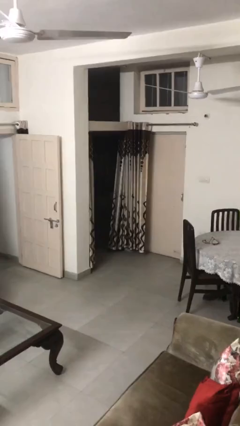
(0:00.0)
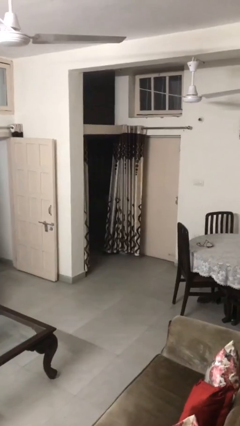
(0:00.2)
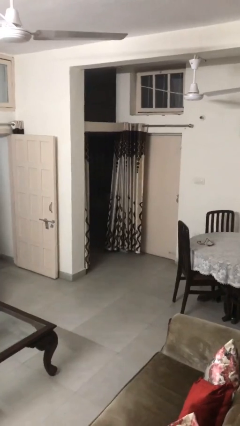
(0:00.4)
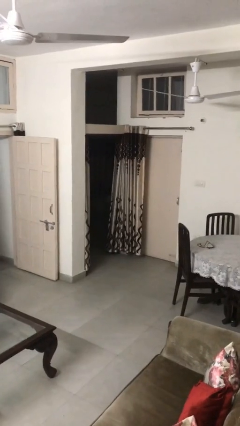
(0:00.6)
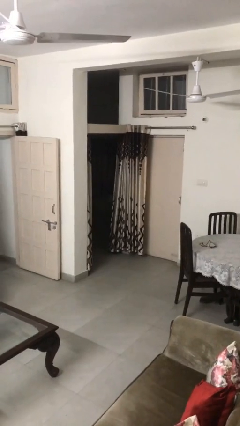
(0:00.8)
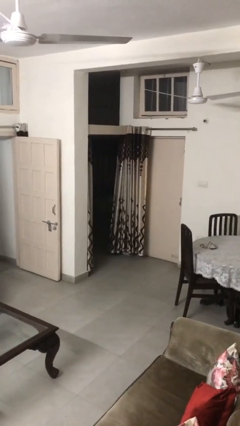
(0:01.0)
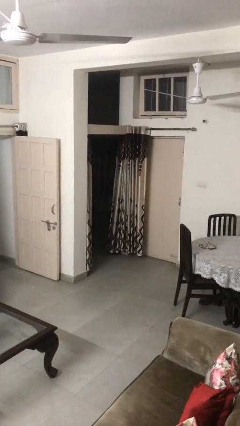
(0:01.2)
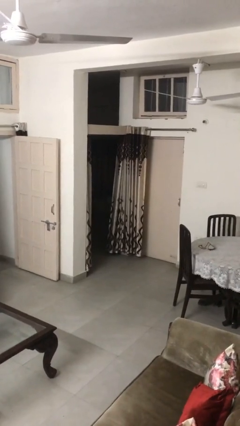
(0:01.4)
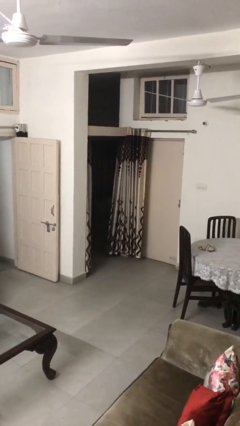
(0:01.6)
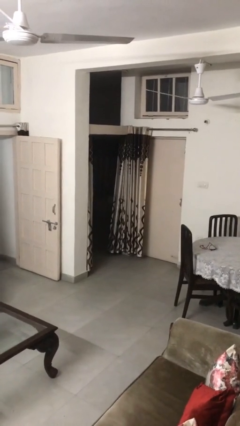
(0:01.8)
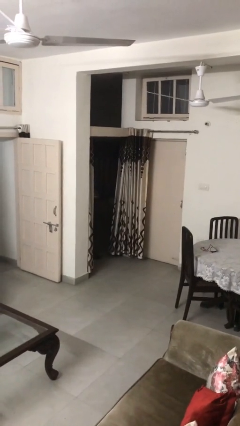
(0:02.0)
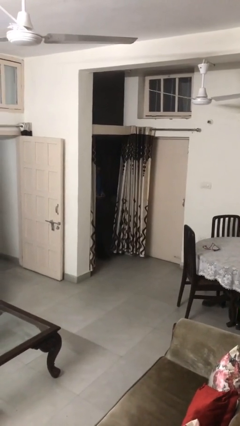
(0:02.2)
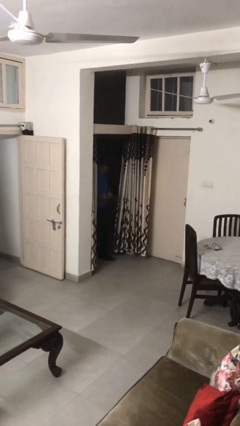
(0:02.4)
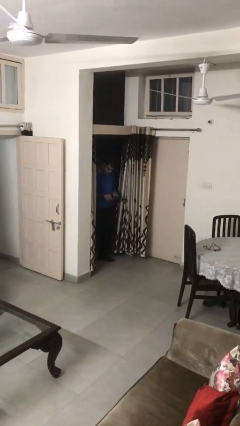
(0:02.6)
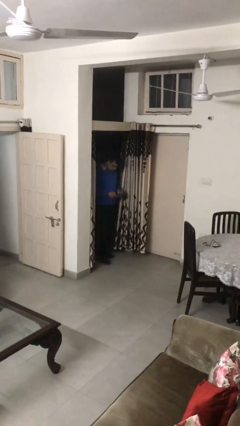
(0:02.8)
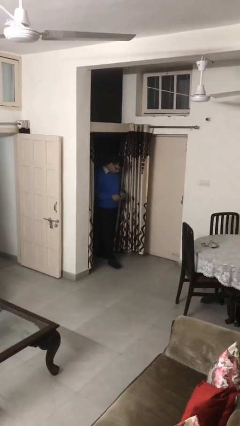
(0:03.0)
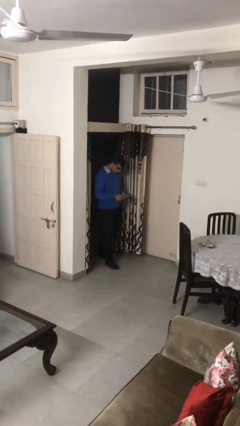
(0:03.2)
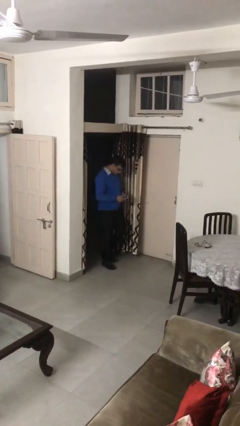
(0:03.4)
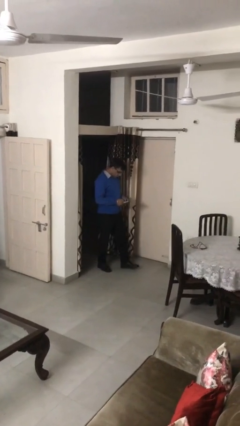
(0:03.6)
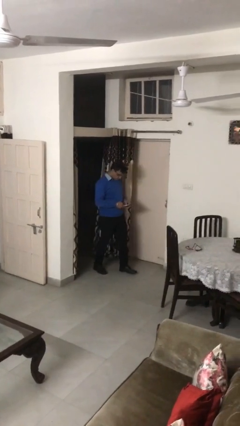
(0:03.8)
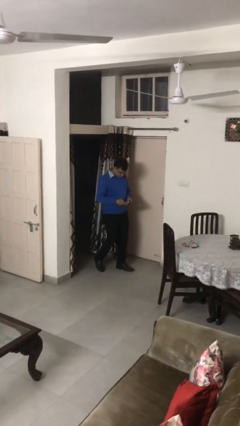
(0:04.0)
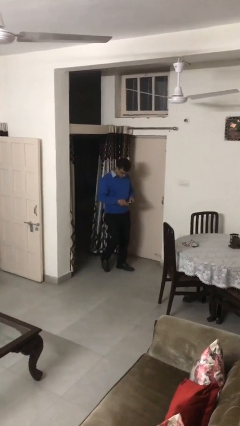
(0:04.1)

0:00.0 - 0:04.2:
person enters scene through structure

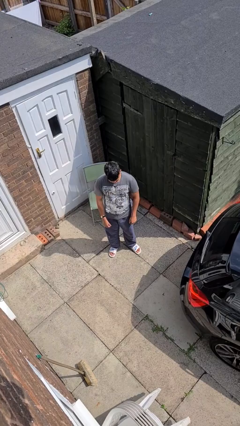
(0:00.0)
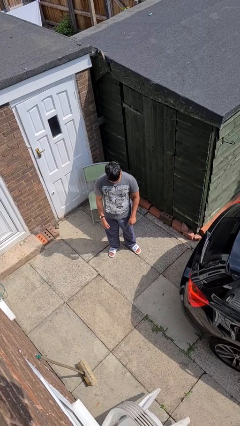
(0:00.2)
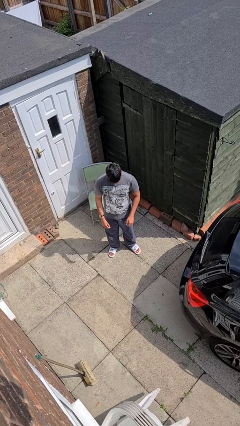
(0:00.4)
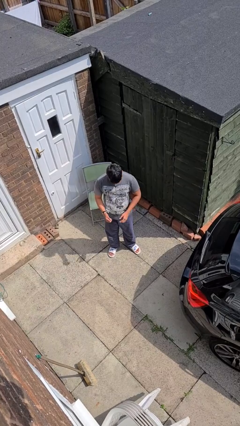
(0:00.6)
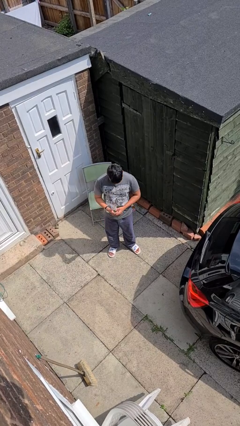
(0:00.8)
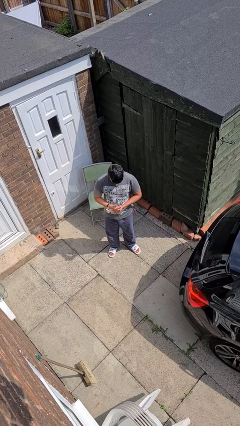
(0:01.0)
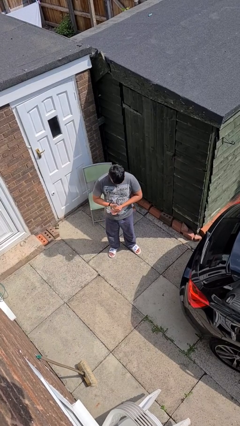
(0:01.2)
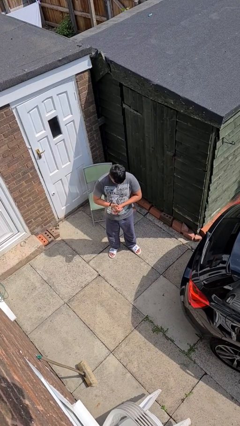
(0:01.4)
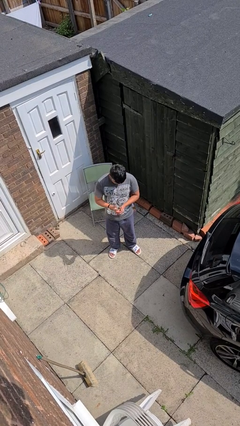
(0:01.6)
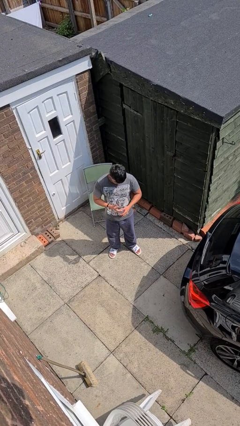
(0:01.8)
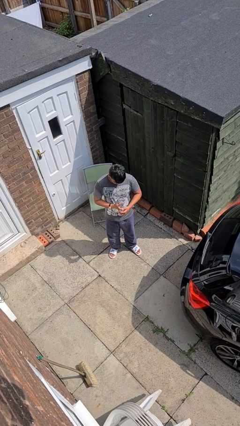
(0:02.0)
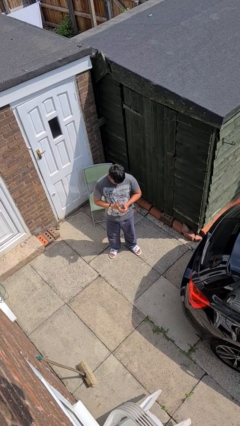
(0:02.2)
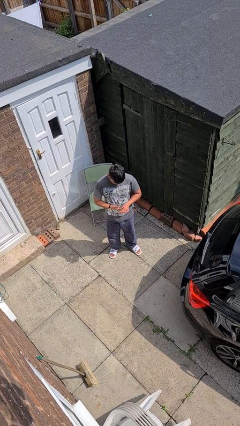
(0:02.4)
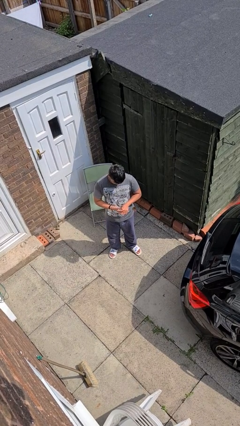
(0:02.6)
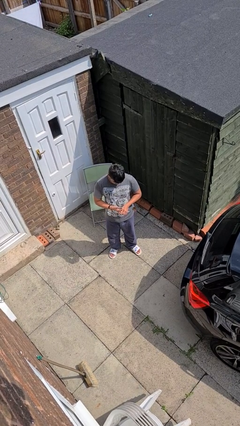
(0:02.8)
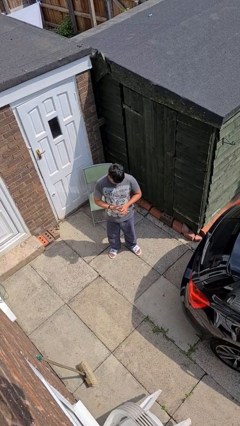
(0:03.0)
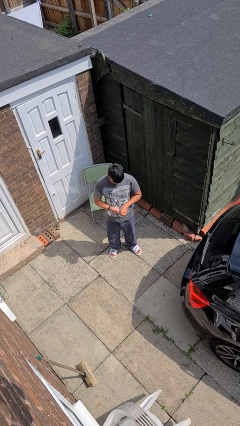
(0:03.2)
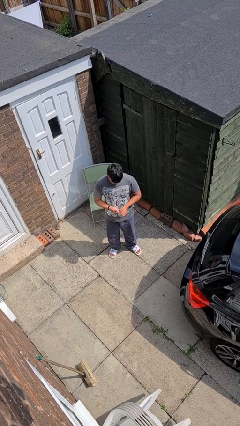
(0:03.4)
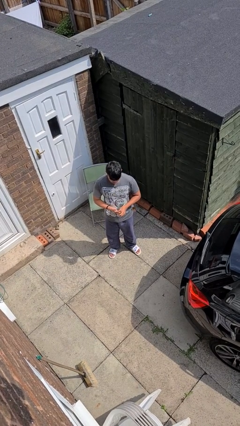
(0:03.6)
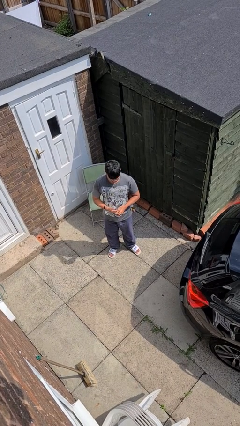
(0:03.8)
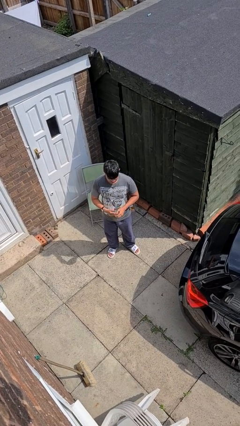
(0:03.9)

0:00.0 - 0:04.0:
person cracks knuckles

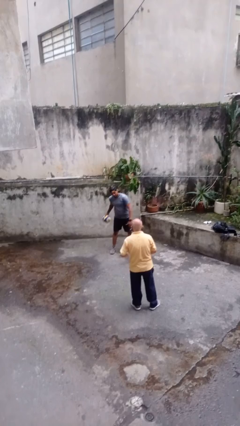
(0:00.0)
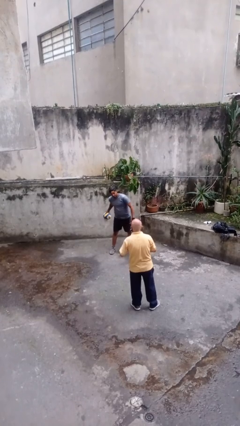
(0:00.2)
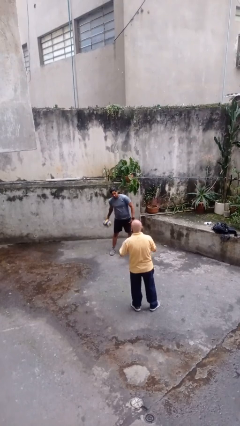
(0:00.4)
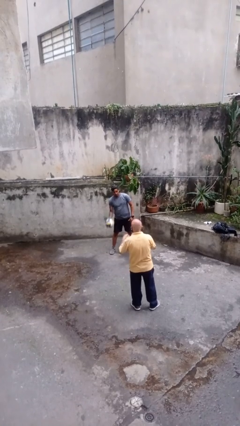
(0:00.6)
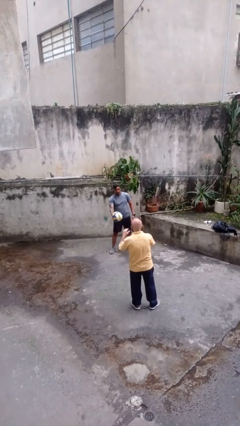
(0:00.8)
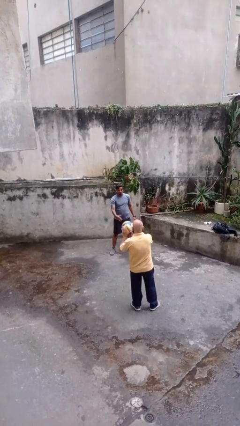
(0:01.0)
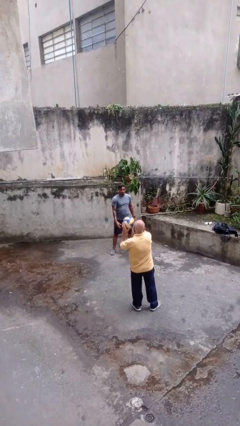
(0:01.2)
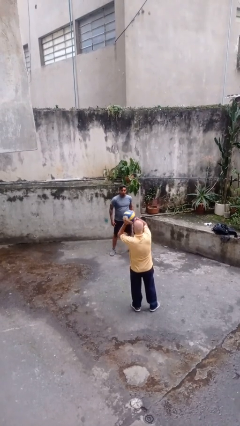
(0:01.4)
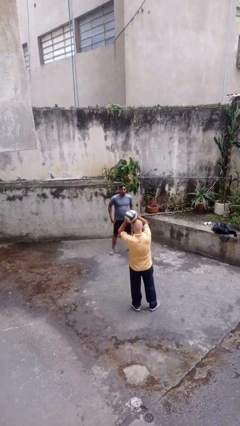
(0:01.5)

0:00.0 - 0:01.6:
person throws object to person

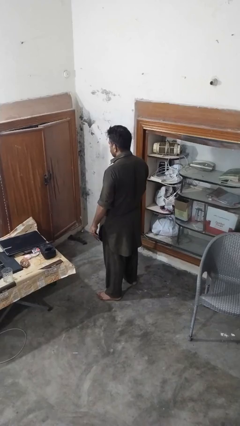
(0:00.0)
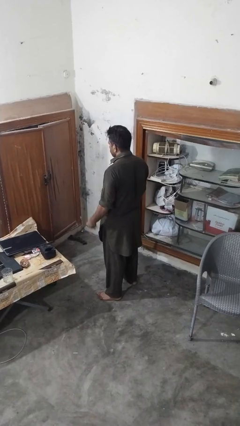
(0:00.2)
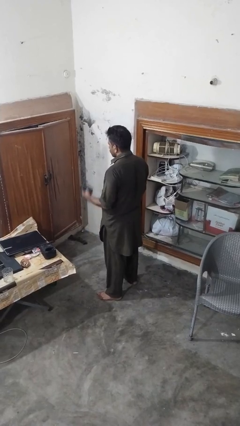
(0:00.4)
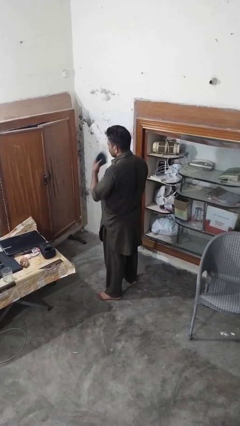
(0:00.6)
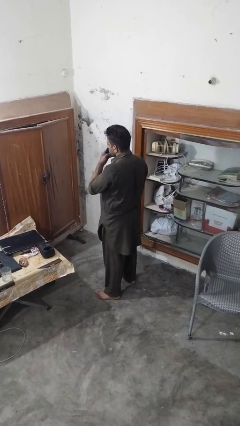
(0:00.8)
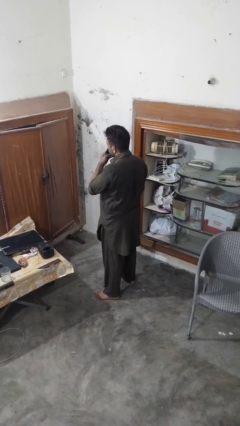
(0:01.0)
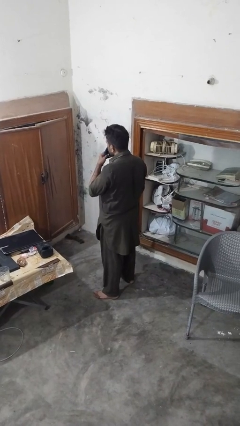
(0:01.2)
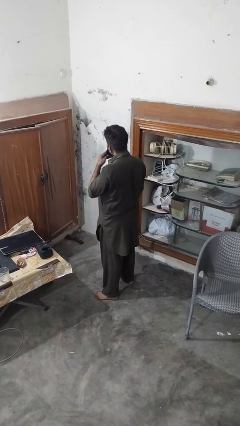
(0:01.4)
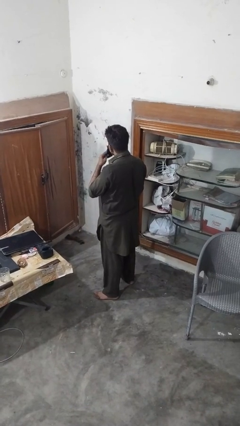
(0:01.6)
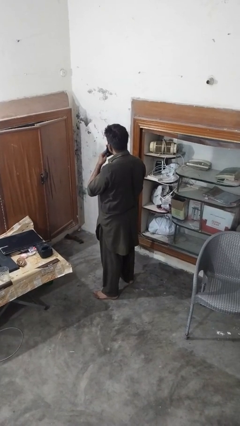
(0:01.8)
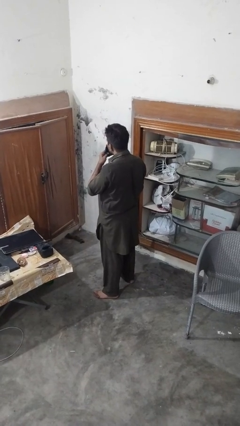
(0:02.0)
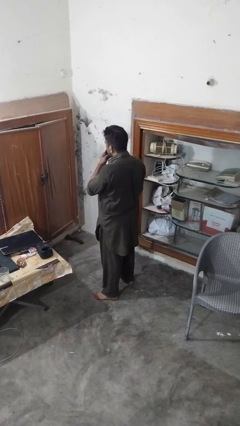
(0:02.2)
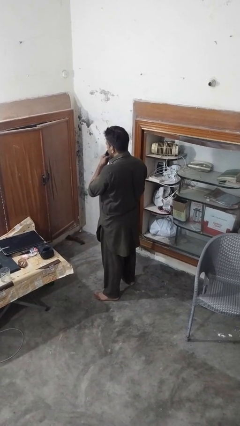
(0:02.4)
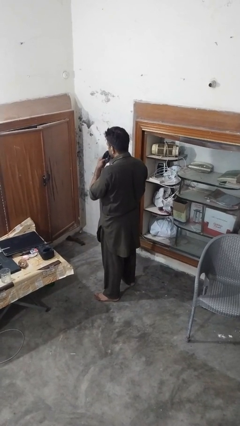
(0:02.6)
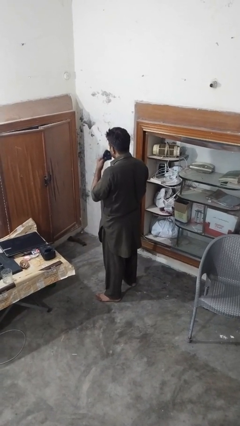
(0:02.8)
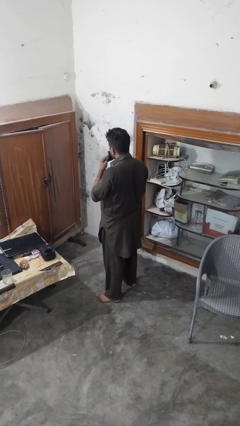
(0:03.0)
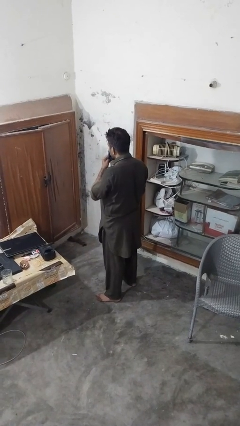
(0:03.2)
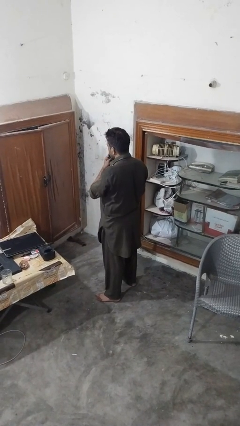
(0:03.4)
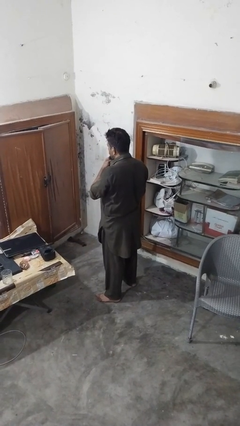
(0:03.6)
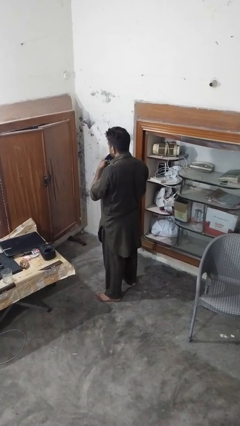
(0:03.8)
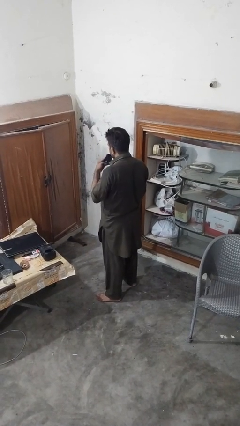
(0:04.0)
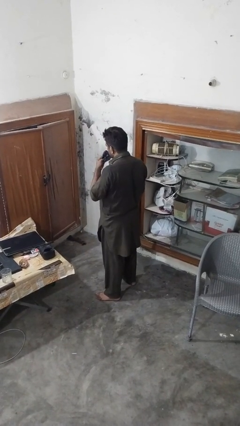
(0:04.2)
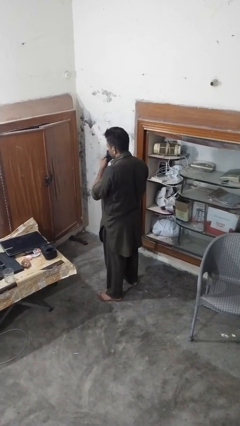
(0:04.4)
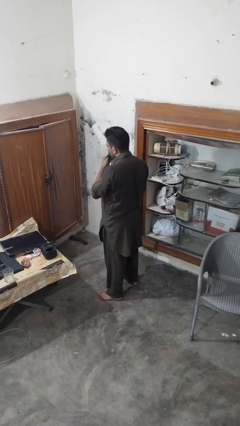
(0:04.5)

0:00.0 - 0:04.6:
person wipes mouth with napkin

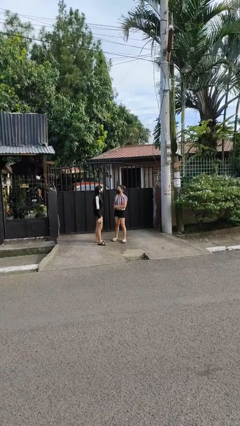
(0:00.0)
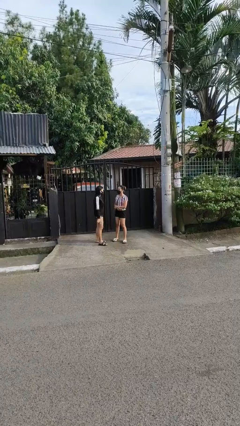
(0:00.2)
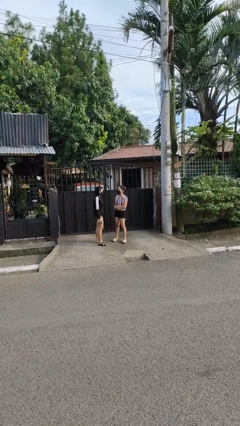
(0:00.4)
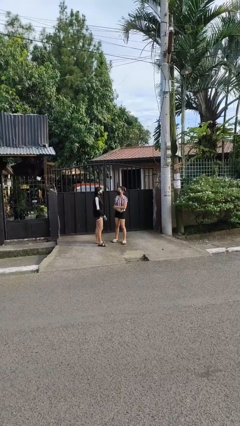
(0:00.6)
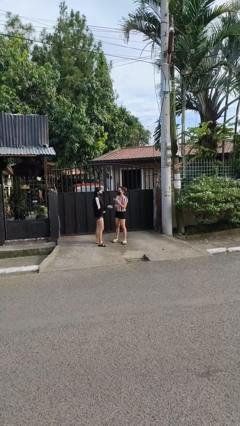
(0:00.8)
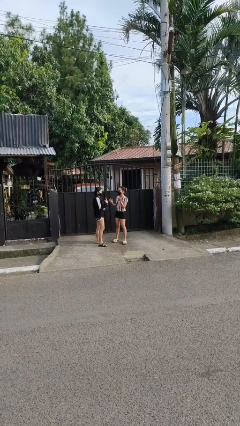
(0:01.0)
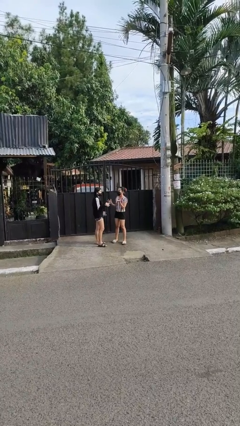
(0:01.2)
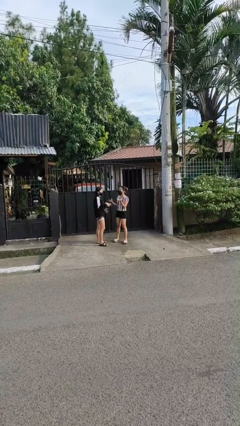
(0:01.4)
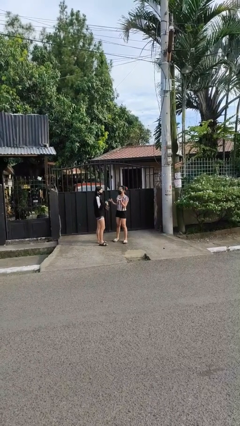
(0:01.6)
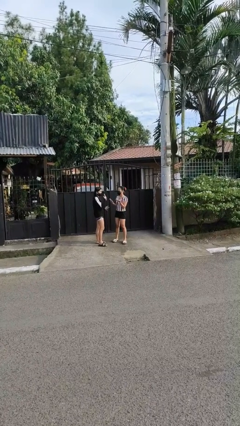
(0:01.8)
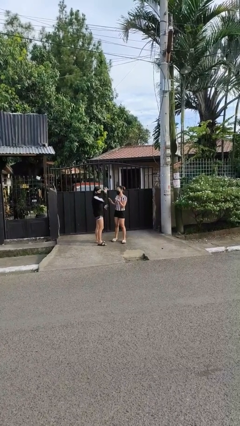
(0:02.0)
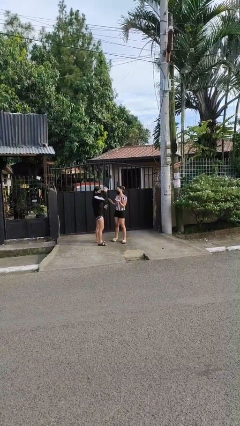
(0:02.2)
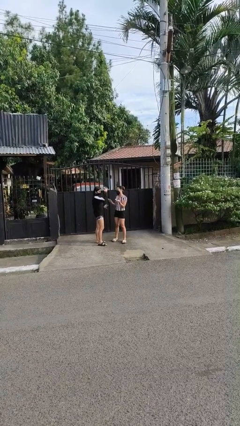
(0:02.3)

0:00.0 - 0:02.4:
person talks to person

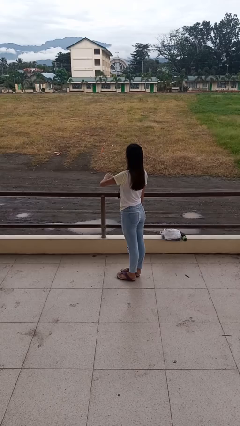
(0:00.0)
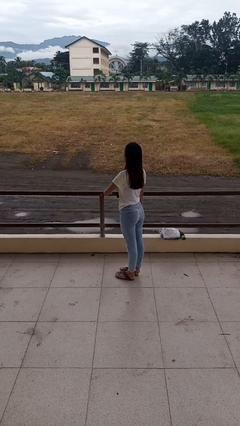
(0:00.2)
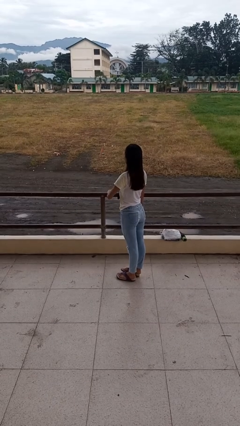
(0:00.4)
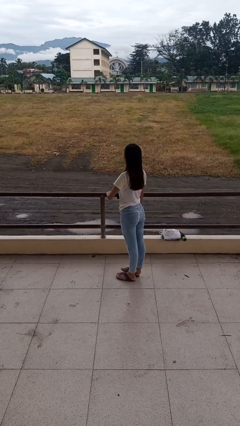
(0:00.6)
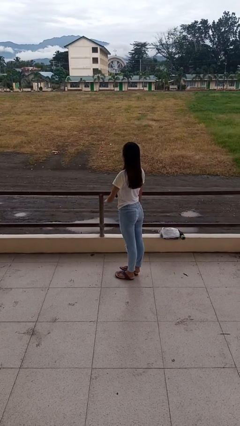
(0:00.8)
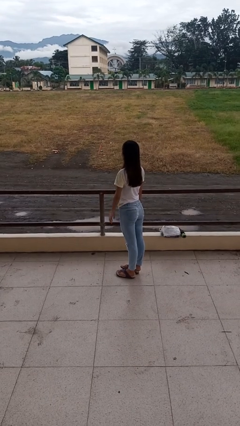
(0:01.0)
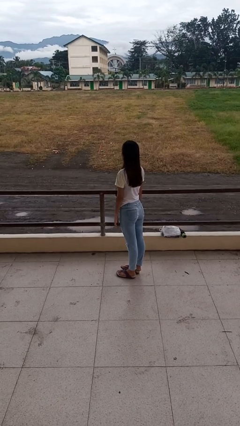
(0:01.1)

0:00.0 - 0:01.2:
person gestures swipe down
